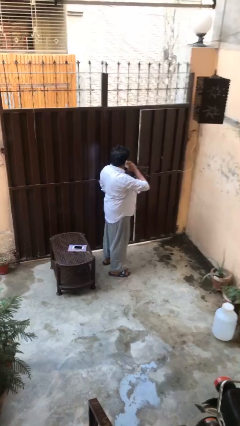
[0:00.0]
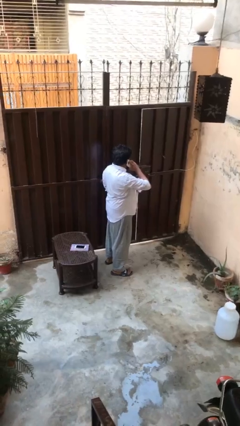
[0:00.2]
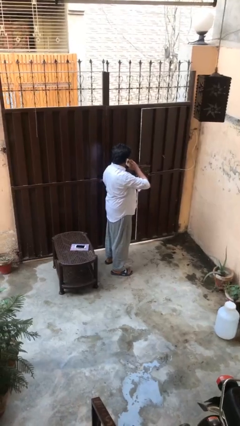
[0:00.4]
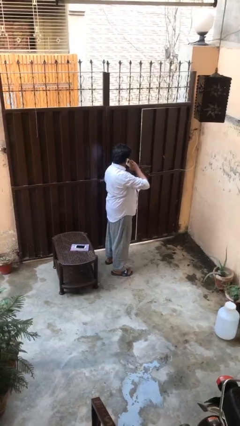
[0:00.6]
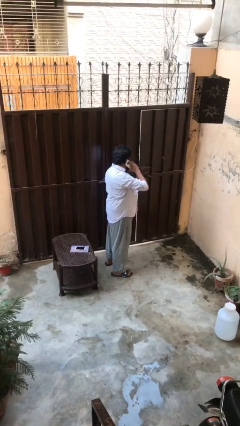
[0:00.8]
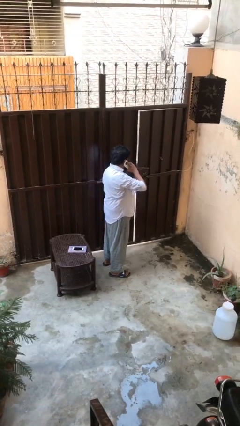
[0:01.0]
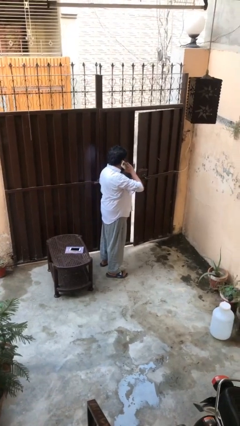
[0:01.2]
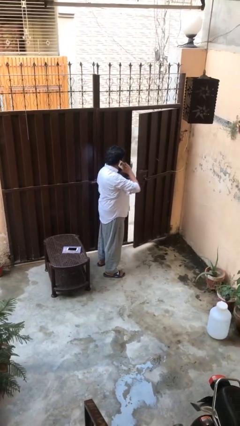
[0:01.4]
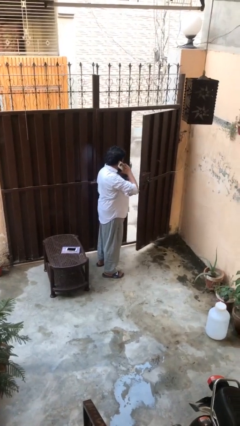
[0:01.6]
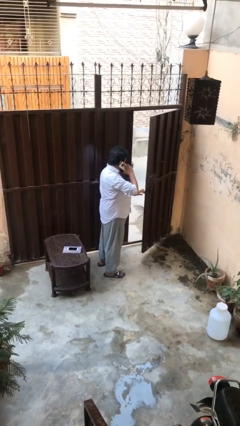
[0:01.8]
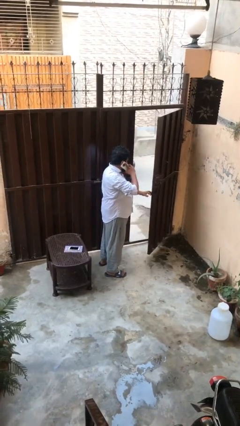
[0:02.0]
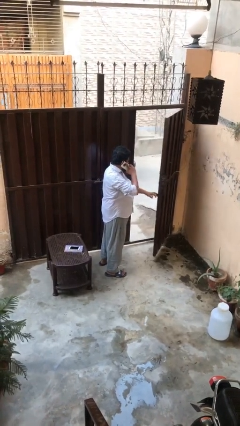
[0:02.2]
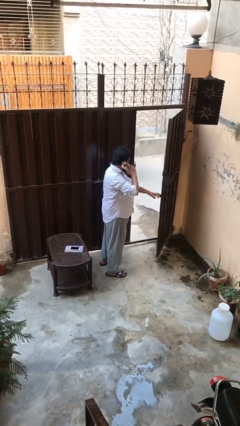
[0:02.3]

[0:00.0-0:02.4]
person opens facility door

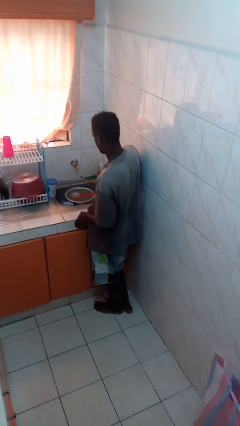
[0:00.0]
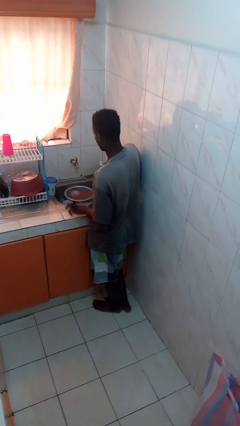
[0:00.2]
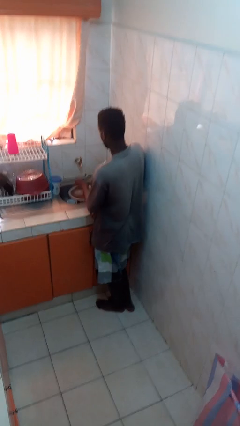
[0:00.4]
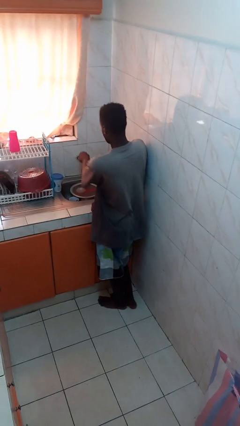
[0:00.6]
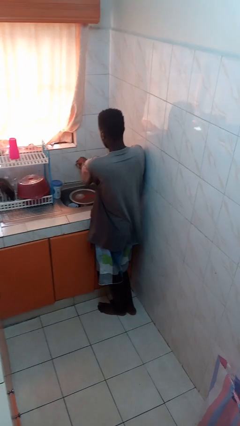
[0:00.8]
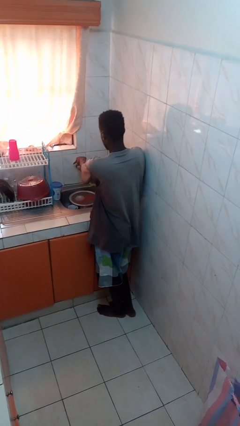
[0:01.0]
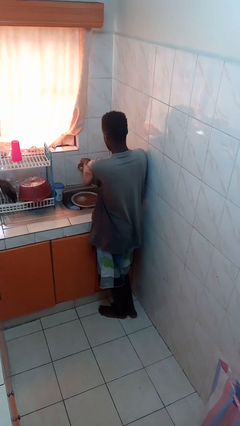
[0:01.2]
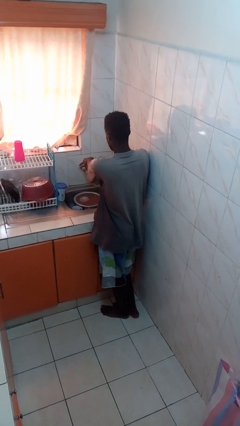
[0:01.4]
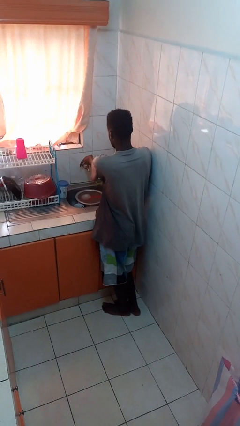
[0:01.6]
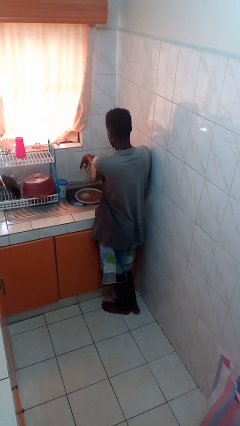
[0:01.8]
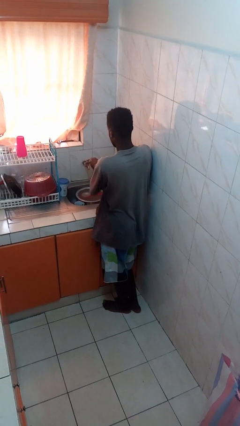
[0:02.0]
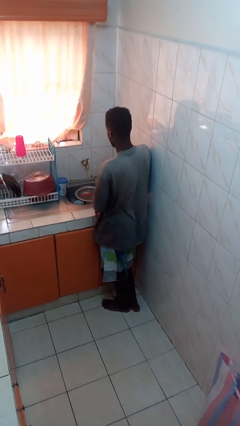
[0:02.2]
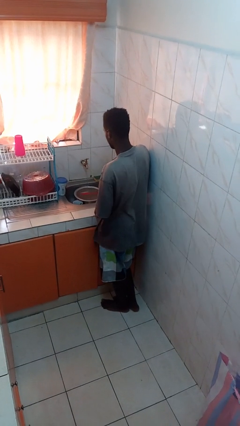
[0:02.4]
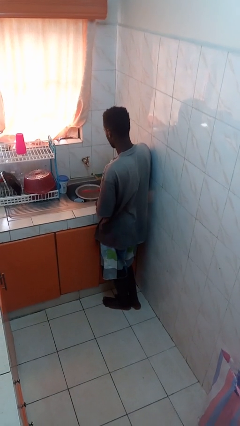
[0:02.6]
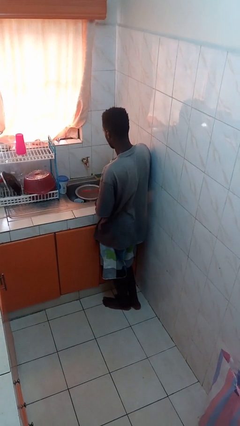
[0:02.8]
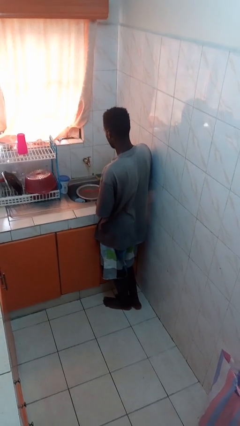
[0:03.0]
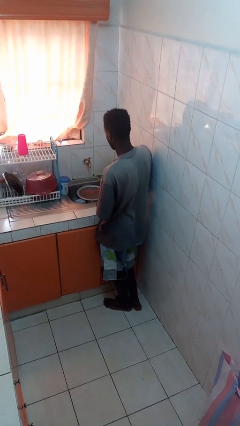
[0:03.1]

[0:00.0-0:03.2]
person turns on faucet

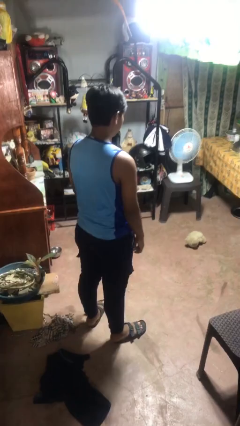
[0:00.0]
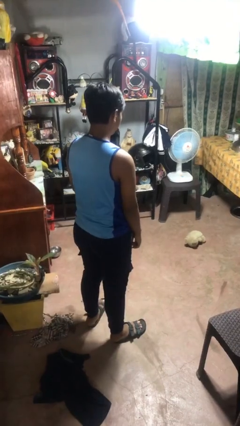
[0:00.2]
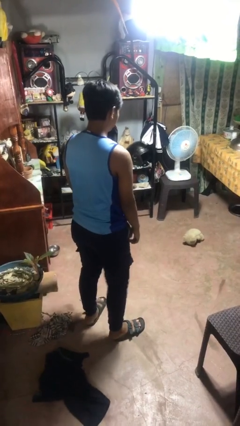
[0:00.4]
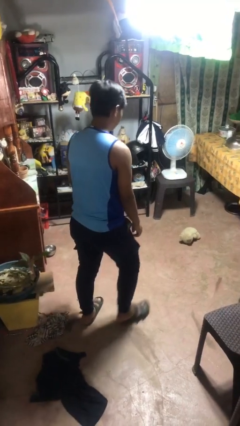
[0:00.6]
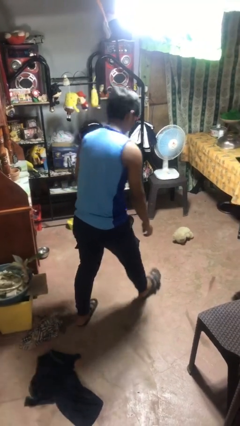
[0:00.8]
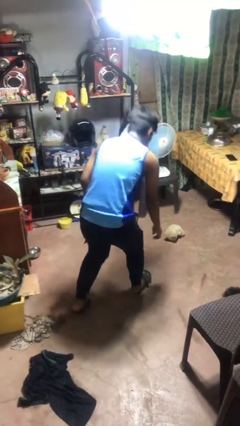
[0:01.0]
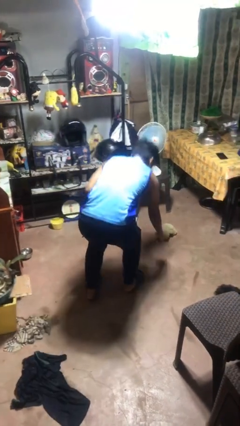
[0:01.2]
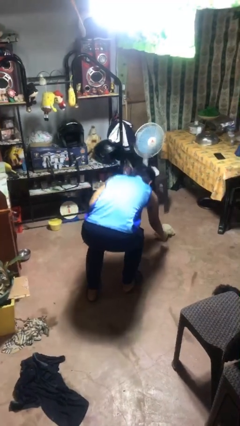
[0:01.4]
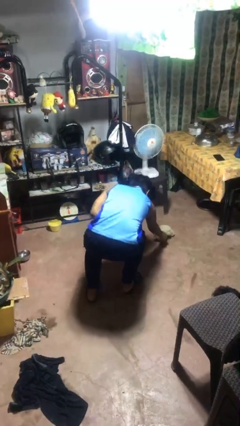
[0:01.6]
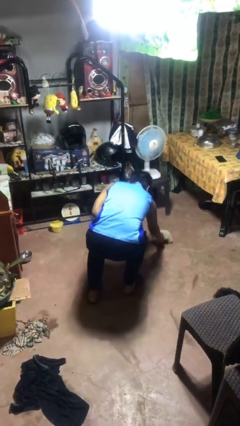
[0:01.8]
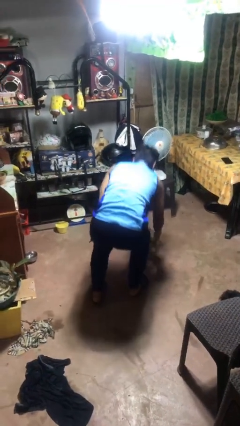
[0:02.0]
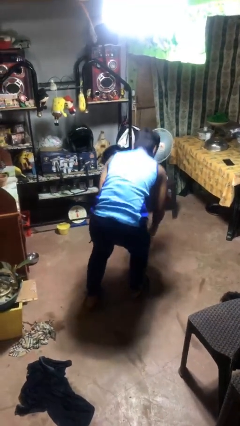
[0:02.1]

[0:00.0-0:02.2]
person picks up object from floor

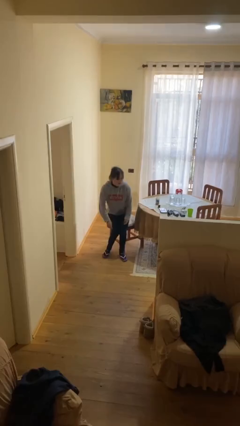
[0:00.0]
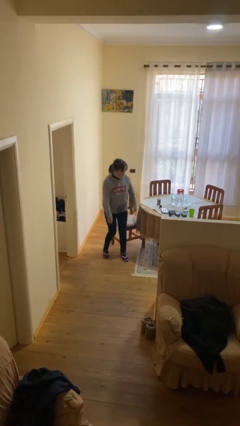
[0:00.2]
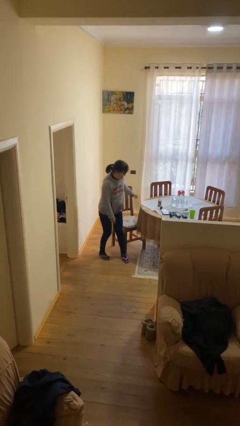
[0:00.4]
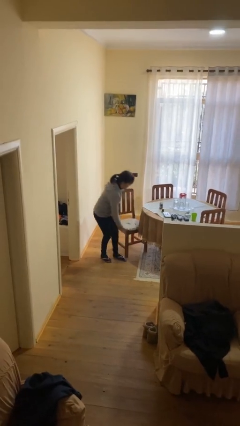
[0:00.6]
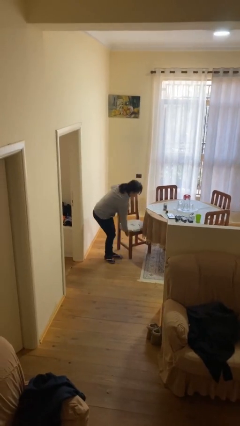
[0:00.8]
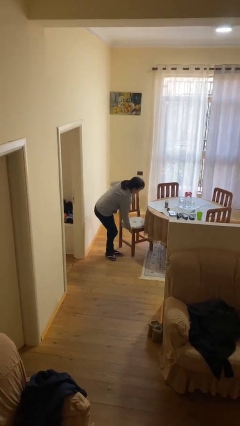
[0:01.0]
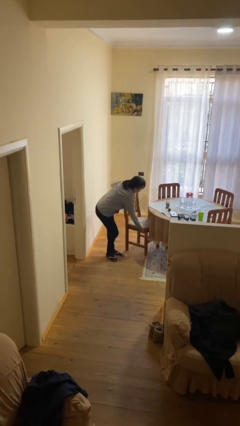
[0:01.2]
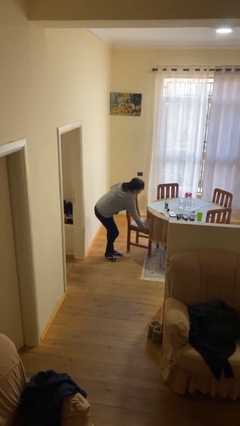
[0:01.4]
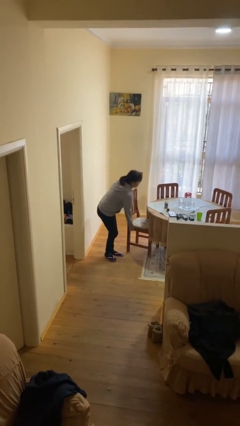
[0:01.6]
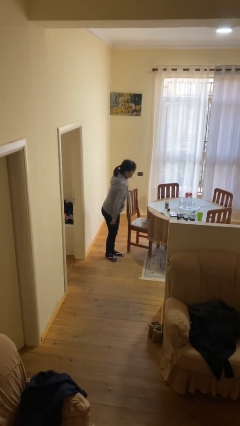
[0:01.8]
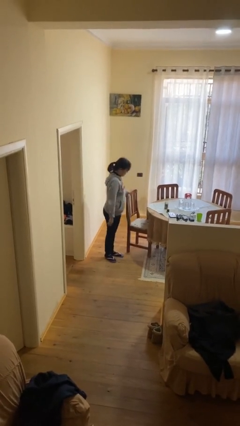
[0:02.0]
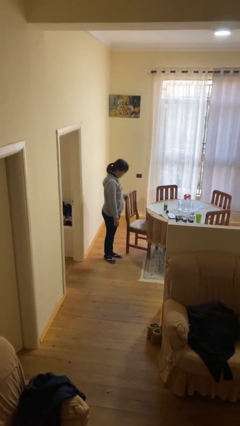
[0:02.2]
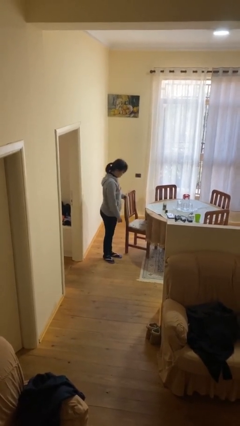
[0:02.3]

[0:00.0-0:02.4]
person stands up

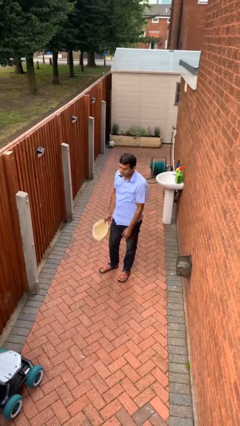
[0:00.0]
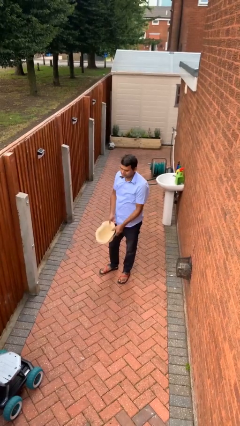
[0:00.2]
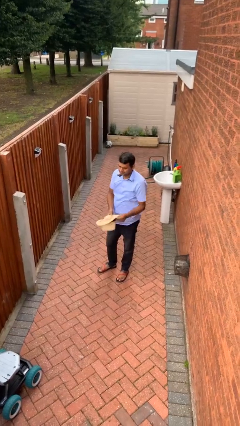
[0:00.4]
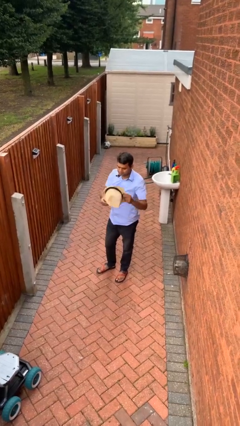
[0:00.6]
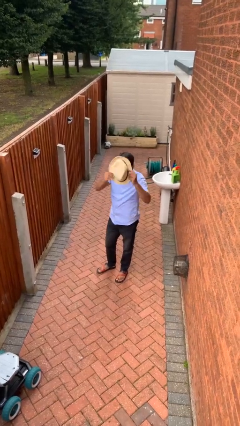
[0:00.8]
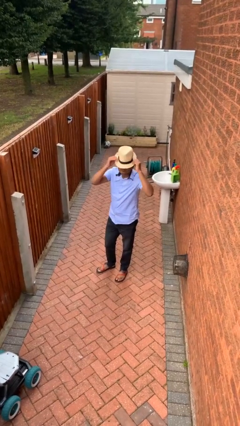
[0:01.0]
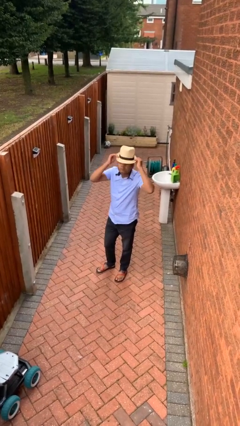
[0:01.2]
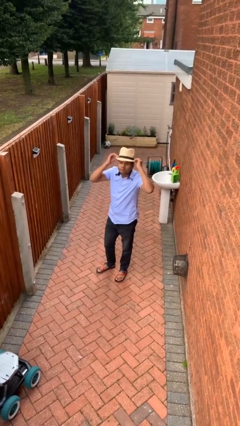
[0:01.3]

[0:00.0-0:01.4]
person puts on hat

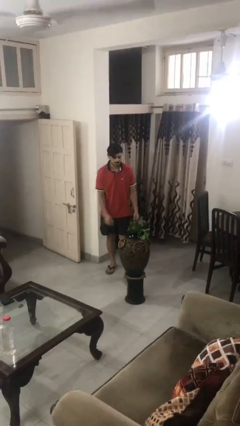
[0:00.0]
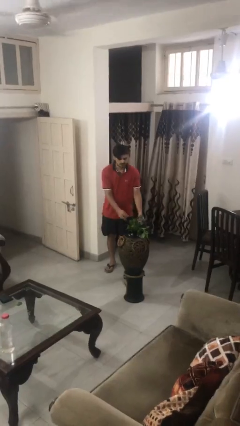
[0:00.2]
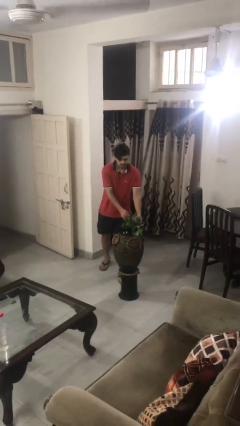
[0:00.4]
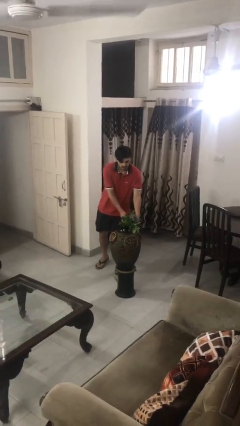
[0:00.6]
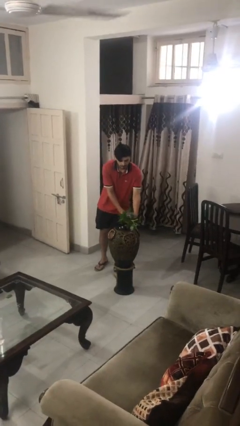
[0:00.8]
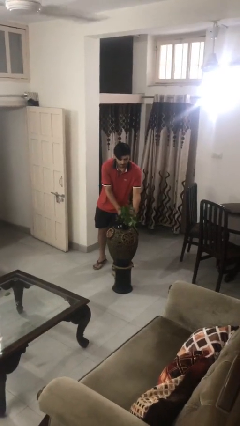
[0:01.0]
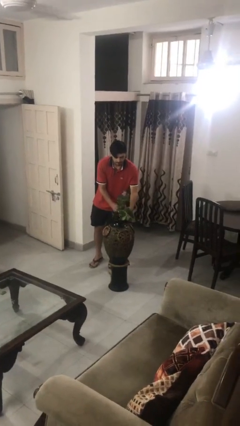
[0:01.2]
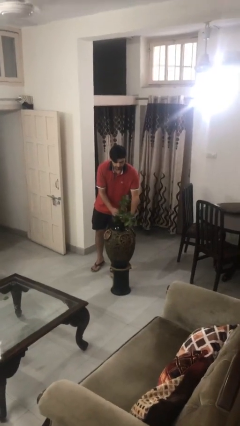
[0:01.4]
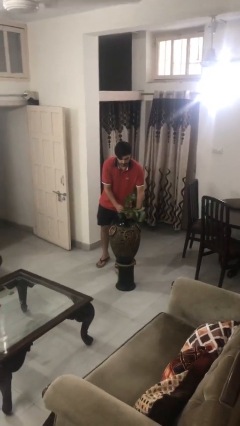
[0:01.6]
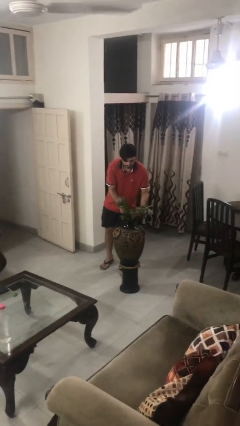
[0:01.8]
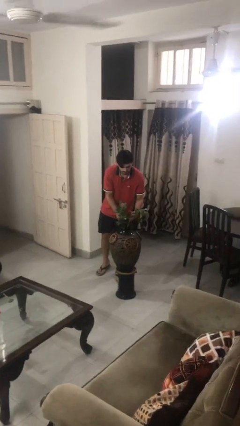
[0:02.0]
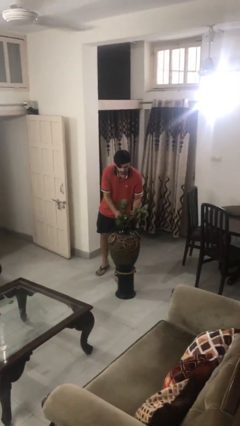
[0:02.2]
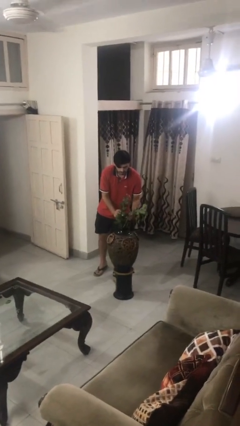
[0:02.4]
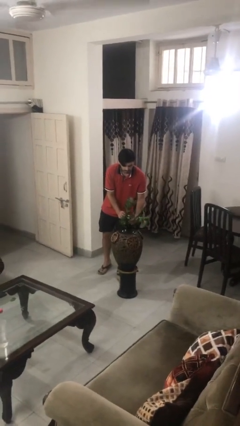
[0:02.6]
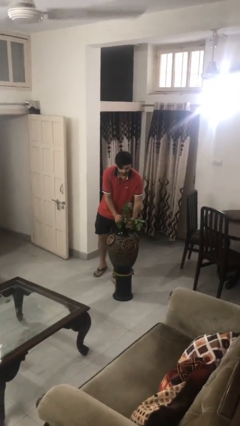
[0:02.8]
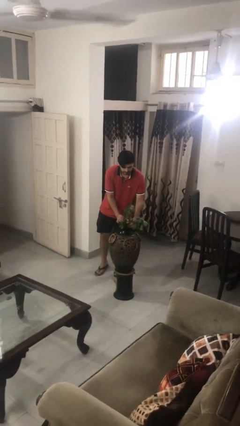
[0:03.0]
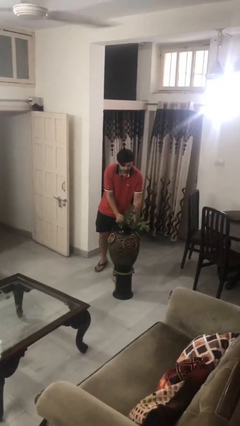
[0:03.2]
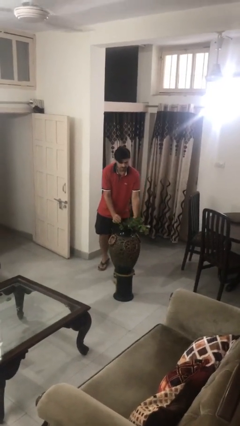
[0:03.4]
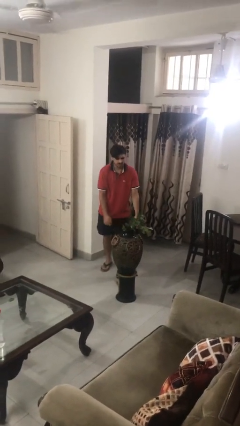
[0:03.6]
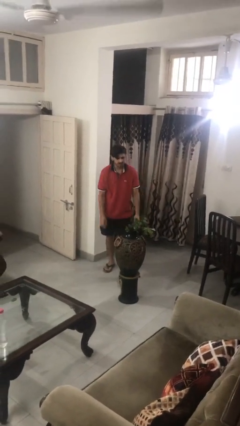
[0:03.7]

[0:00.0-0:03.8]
person arranges flowers in vase

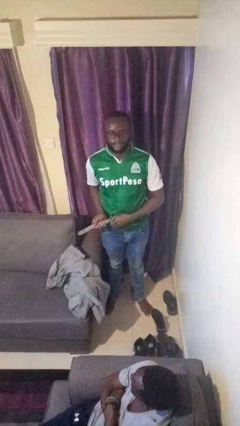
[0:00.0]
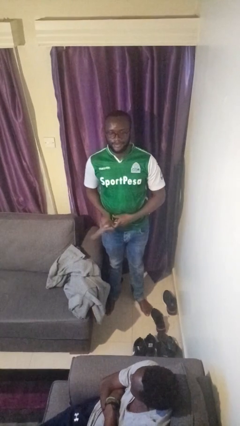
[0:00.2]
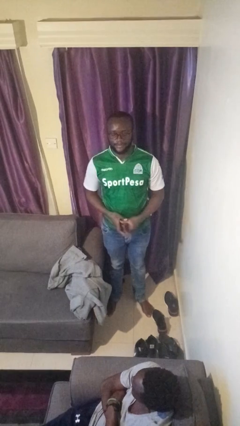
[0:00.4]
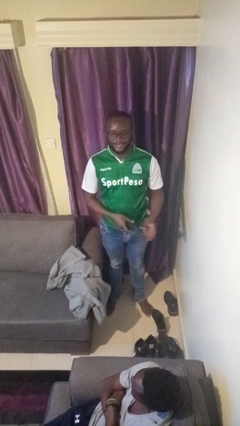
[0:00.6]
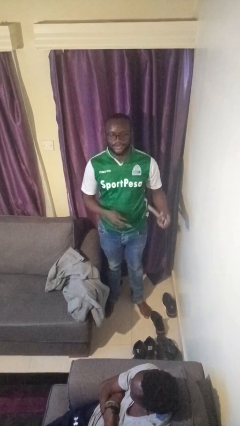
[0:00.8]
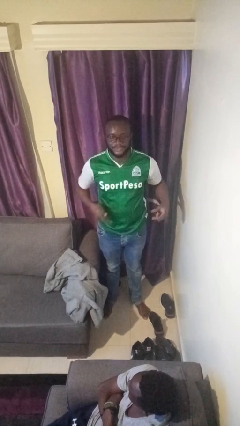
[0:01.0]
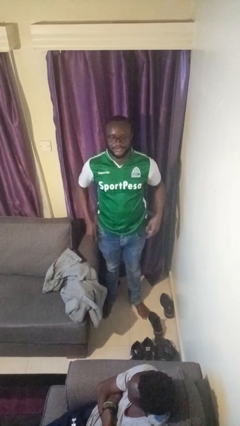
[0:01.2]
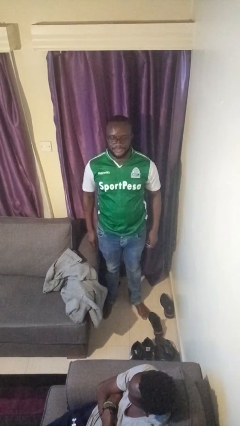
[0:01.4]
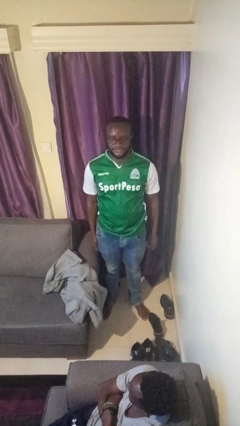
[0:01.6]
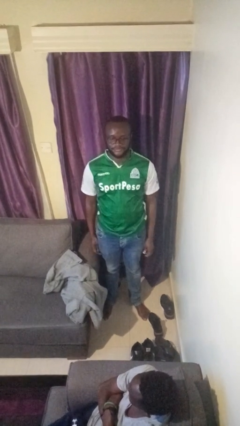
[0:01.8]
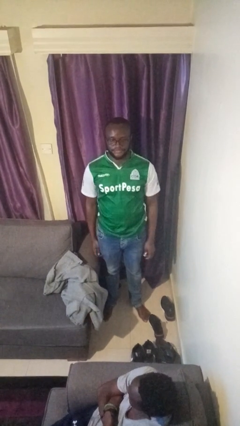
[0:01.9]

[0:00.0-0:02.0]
person takes off belt
